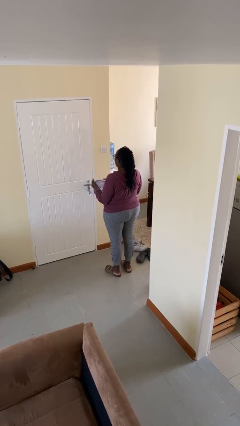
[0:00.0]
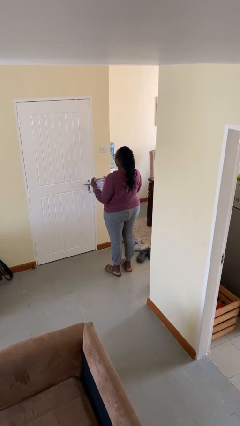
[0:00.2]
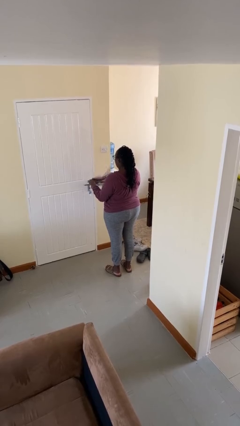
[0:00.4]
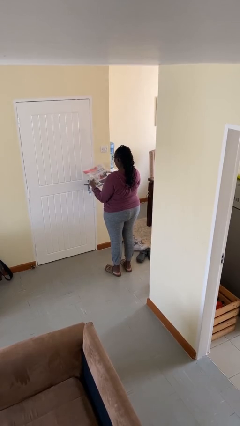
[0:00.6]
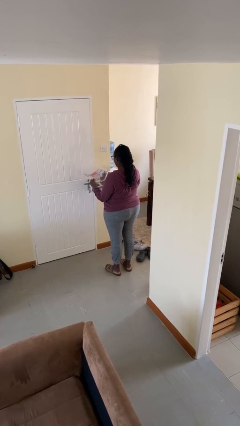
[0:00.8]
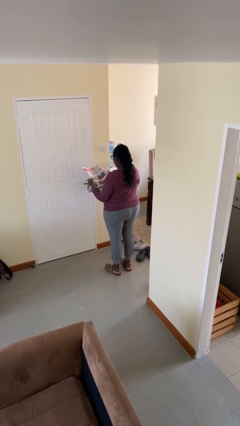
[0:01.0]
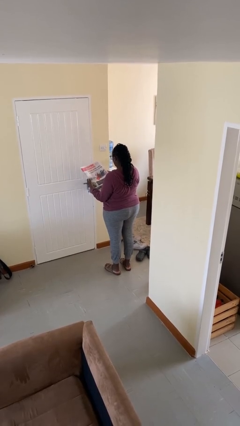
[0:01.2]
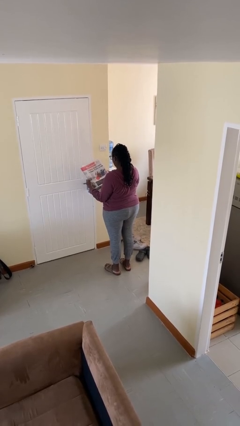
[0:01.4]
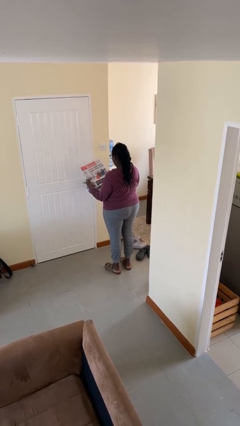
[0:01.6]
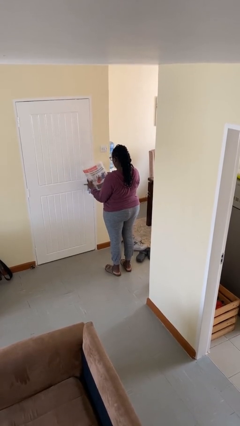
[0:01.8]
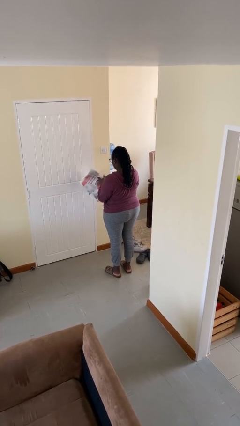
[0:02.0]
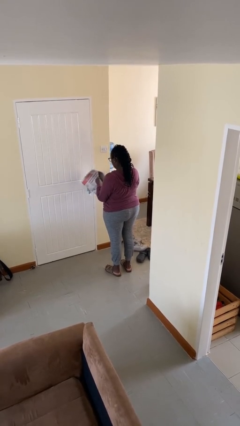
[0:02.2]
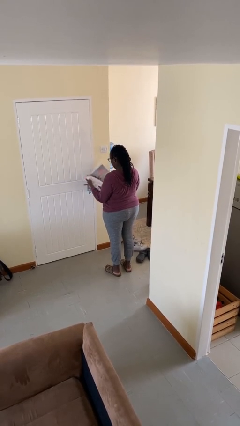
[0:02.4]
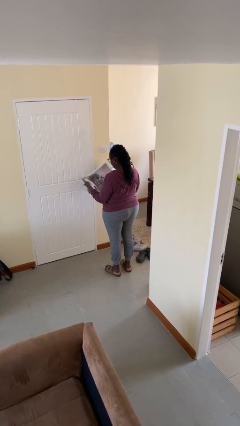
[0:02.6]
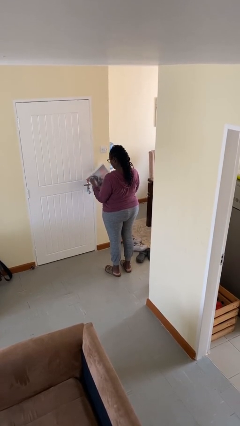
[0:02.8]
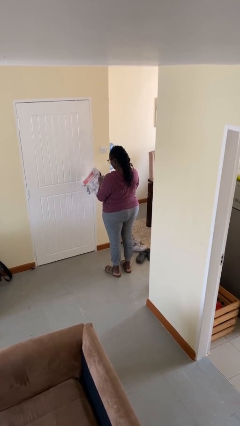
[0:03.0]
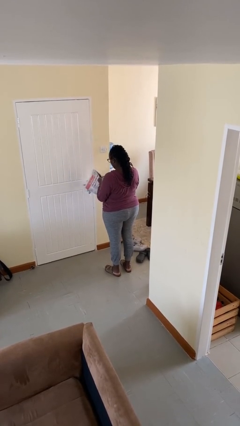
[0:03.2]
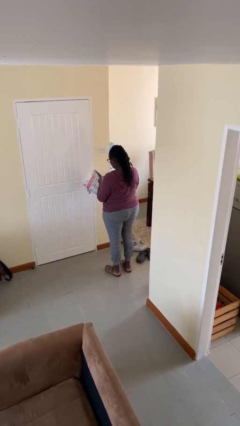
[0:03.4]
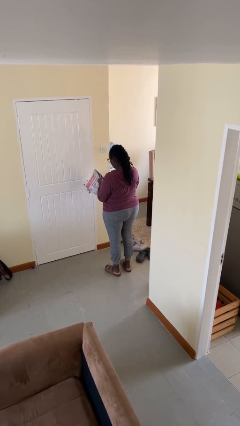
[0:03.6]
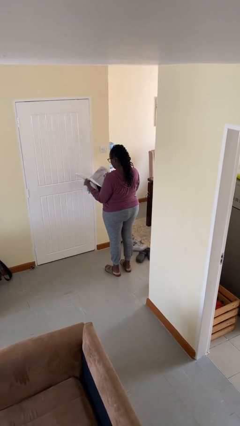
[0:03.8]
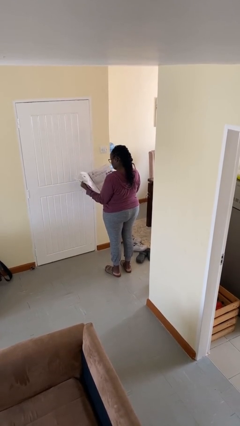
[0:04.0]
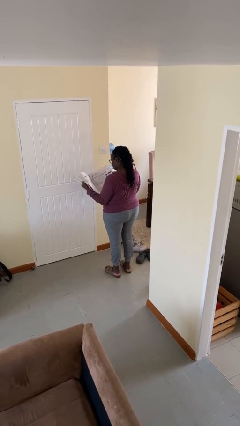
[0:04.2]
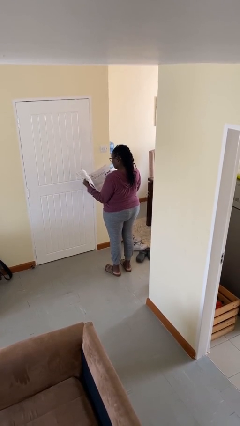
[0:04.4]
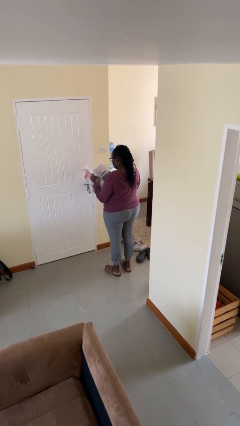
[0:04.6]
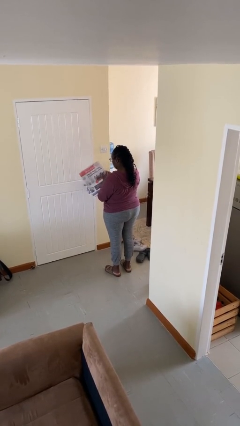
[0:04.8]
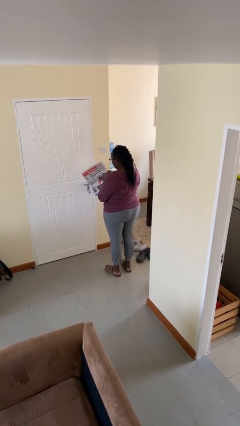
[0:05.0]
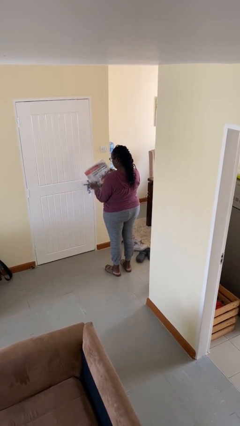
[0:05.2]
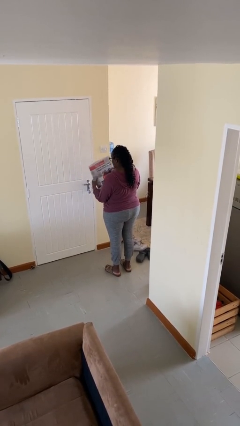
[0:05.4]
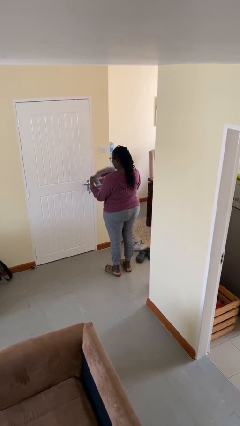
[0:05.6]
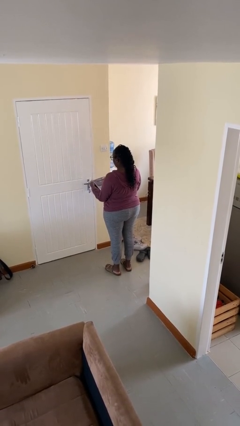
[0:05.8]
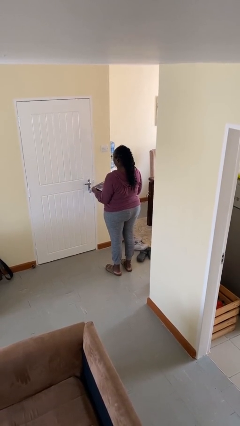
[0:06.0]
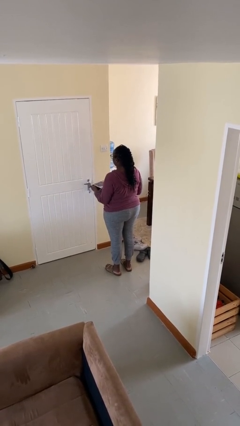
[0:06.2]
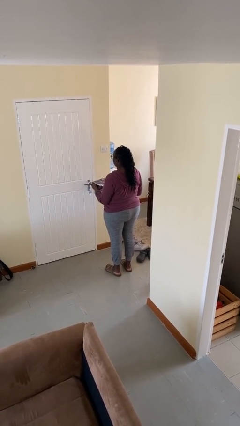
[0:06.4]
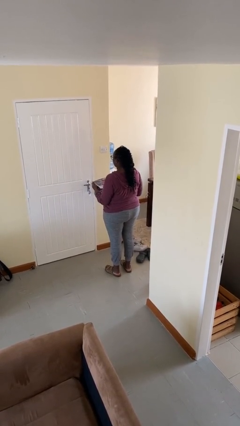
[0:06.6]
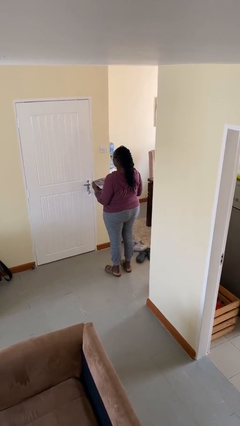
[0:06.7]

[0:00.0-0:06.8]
person reads newspaper

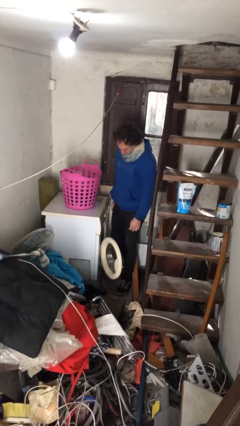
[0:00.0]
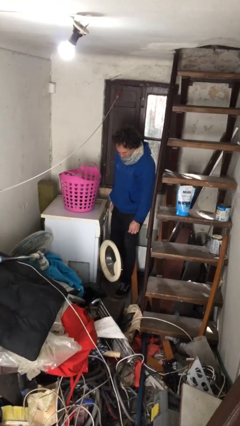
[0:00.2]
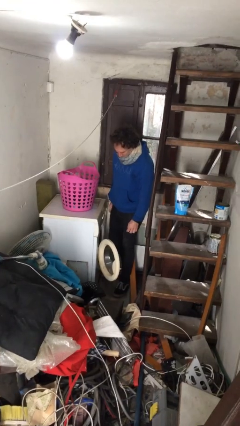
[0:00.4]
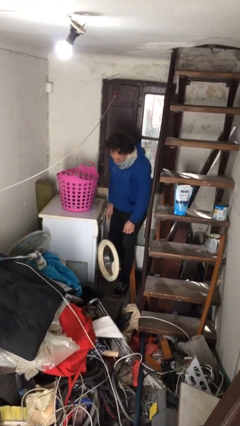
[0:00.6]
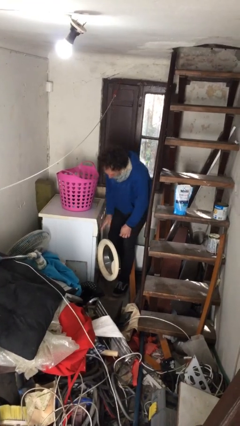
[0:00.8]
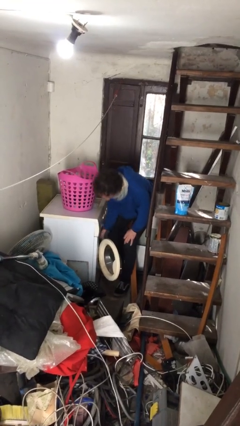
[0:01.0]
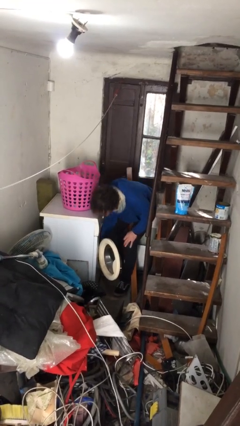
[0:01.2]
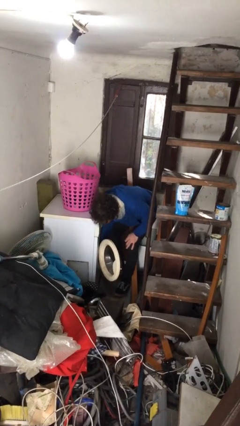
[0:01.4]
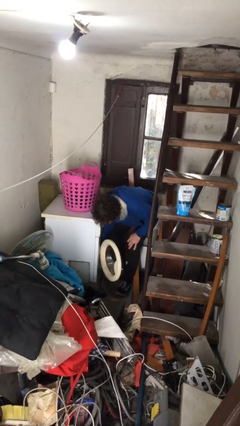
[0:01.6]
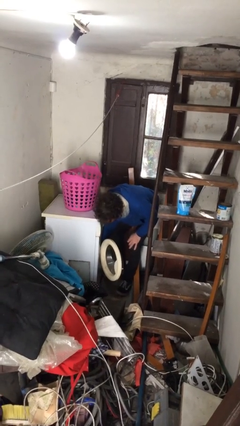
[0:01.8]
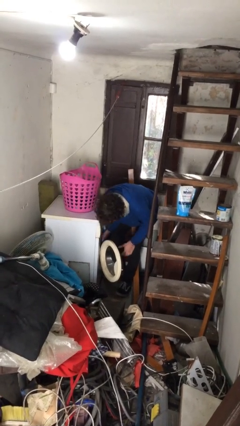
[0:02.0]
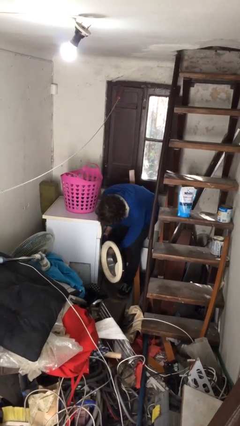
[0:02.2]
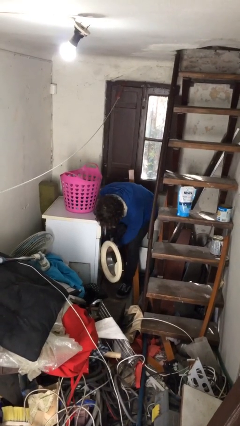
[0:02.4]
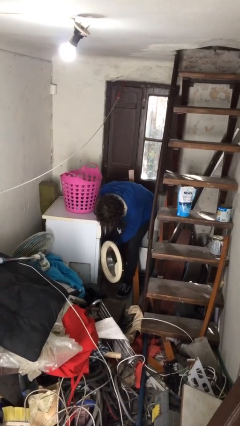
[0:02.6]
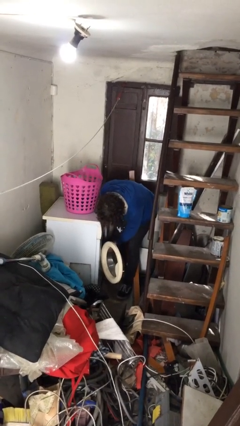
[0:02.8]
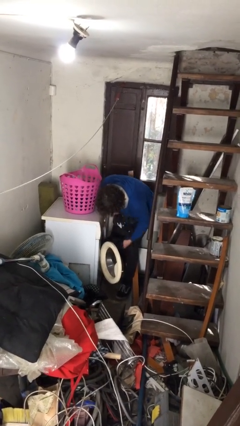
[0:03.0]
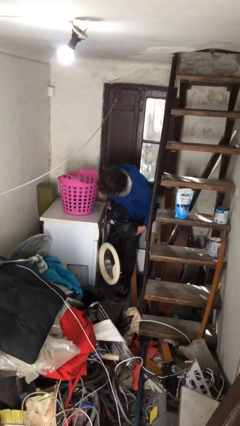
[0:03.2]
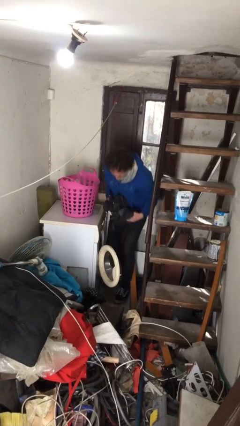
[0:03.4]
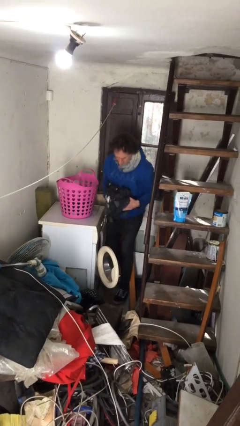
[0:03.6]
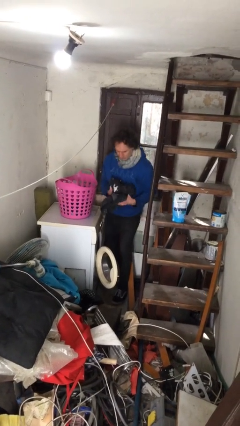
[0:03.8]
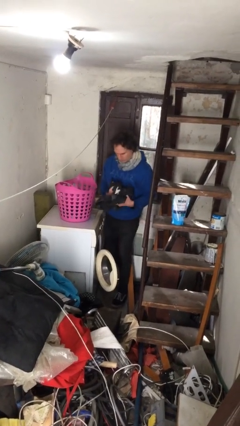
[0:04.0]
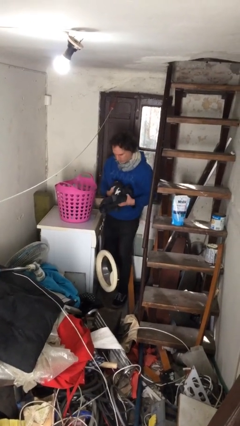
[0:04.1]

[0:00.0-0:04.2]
person loads clotheswasher

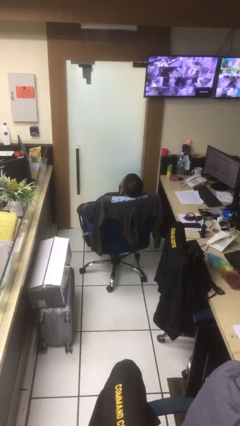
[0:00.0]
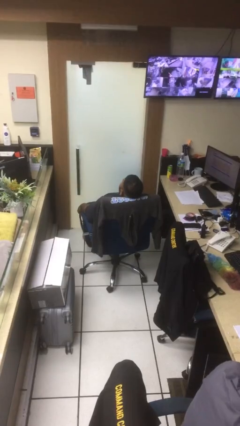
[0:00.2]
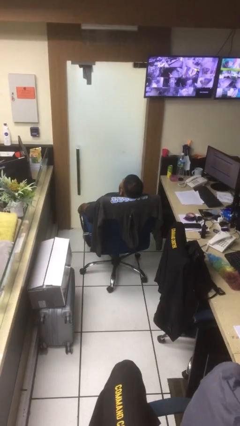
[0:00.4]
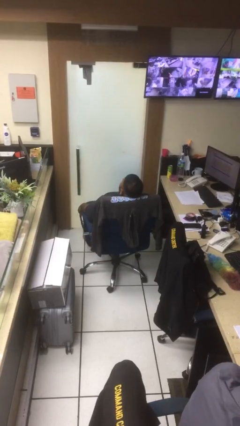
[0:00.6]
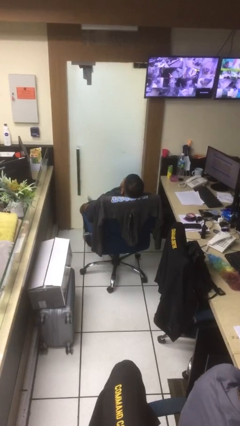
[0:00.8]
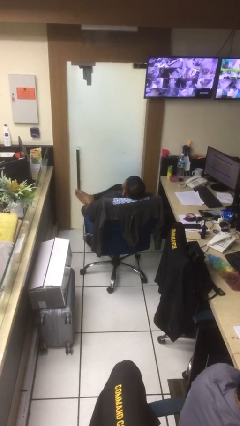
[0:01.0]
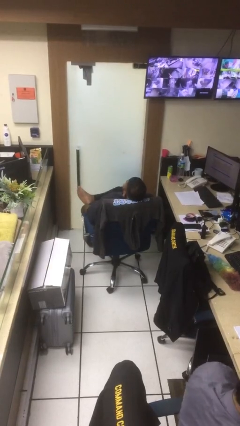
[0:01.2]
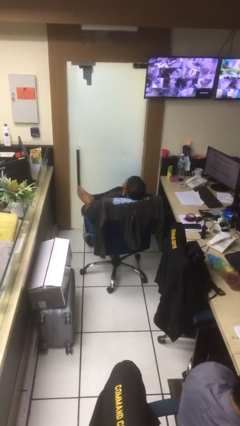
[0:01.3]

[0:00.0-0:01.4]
person crosses legs

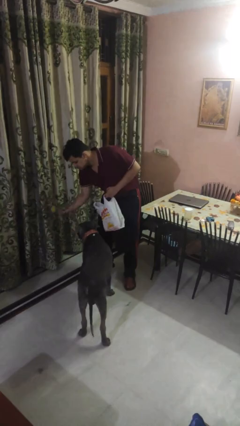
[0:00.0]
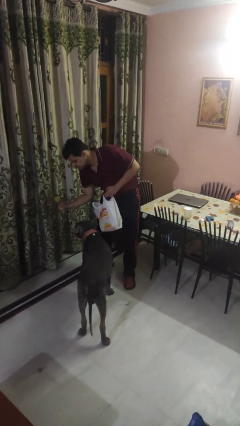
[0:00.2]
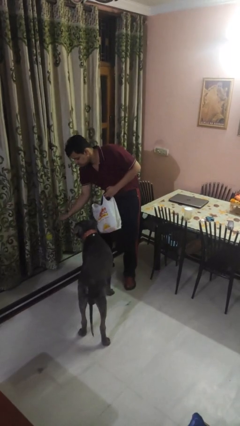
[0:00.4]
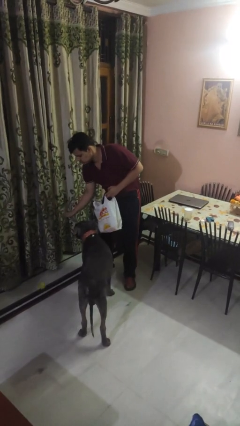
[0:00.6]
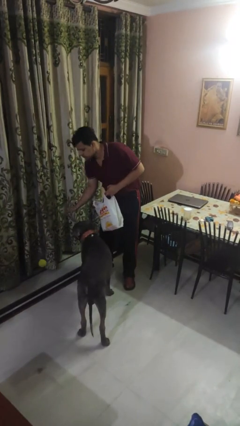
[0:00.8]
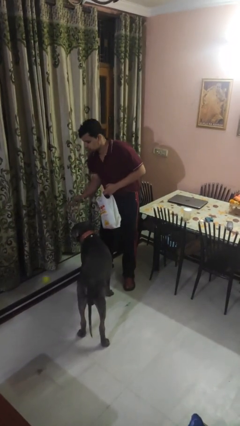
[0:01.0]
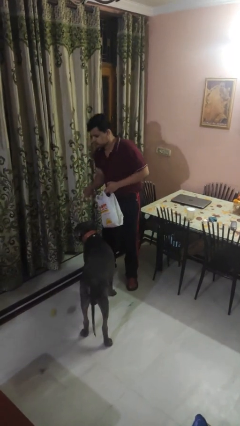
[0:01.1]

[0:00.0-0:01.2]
person throws object to dog

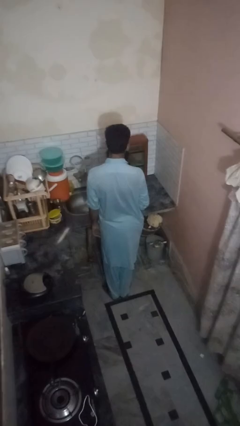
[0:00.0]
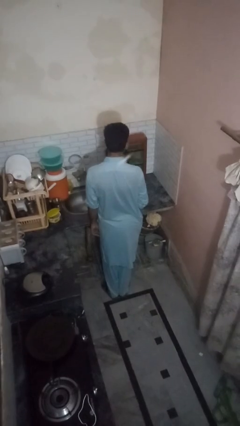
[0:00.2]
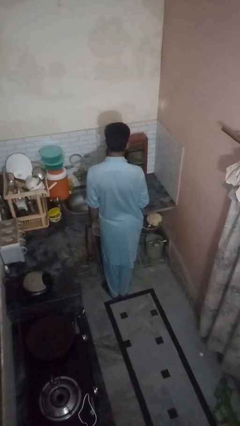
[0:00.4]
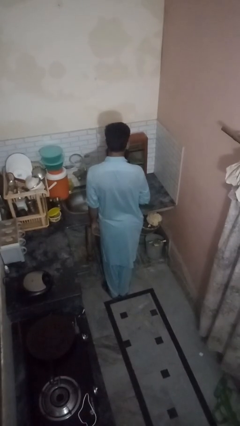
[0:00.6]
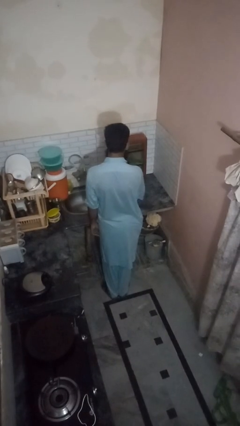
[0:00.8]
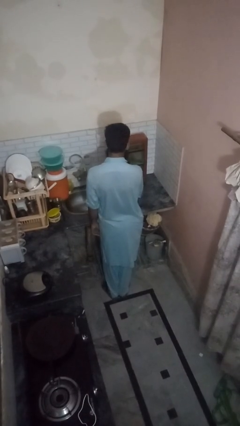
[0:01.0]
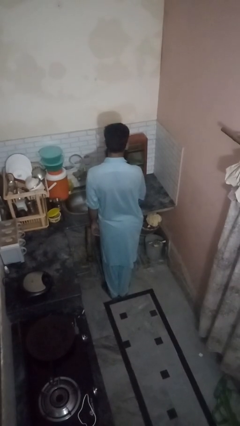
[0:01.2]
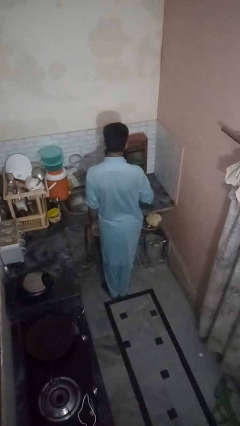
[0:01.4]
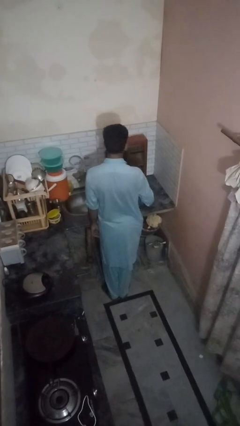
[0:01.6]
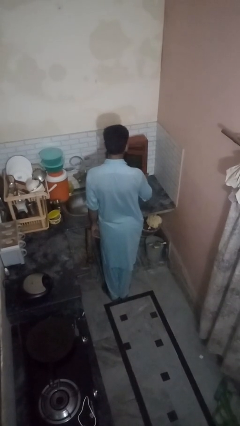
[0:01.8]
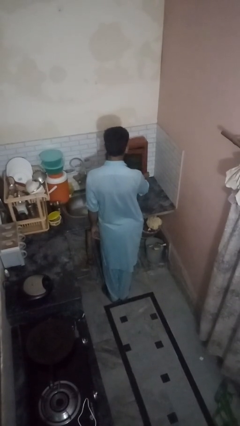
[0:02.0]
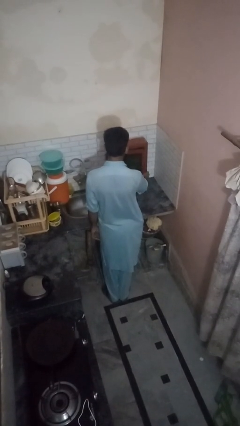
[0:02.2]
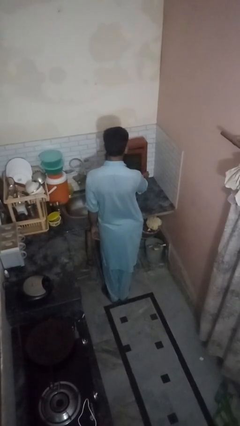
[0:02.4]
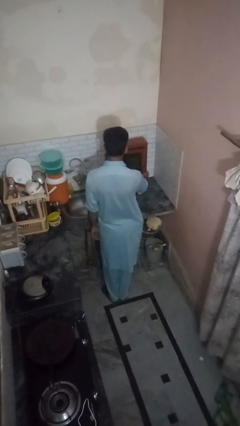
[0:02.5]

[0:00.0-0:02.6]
person closes kitchen drawer

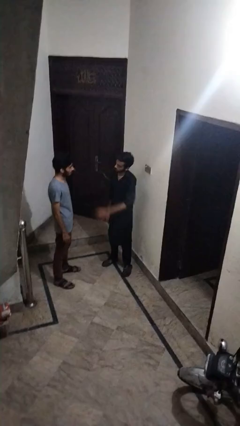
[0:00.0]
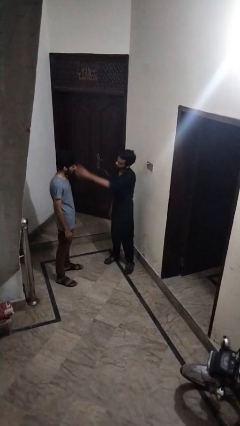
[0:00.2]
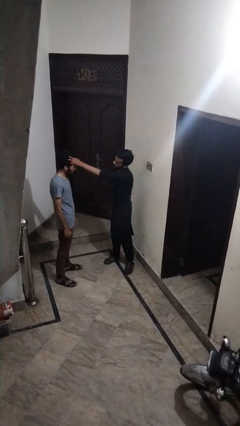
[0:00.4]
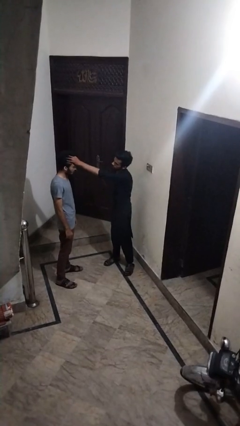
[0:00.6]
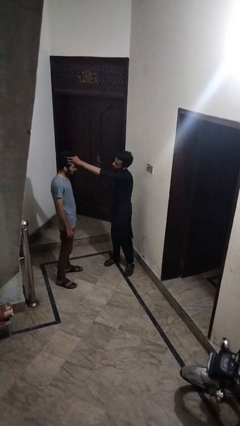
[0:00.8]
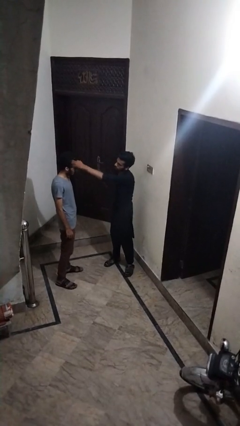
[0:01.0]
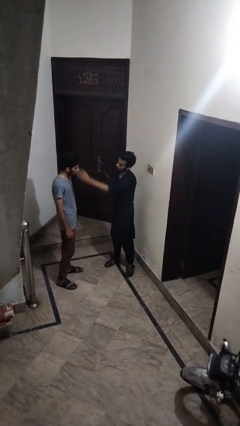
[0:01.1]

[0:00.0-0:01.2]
person grabs person by hair

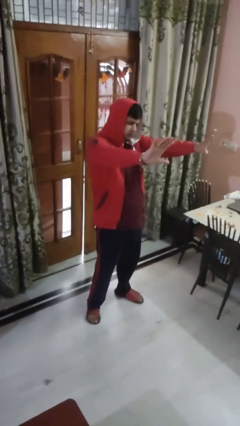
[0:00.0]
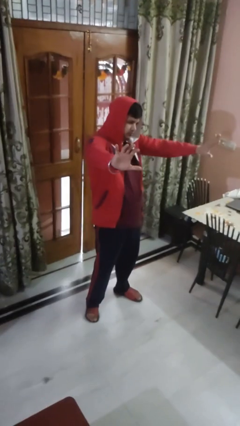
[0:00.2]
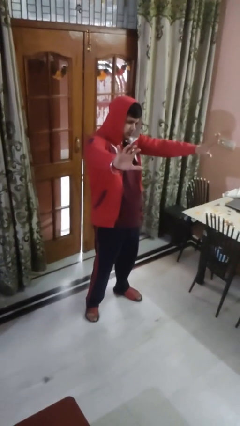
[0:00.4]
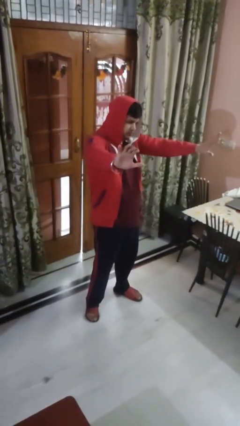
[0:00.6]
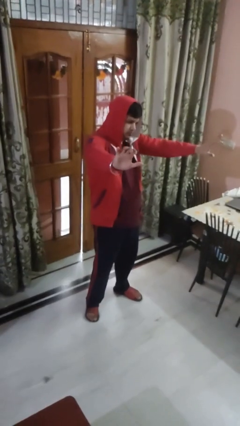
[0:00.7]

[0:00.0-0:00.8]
person gestures zoom in
